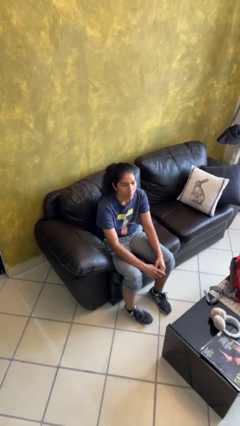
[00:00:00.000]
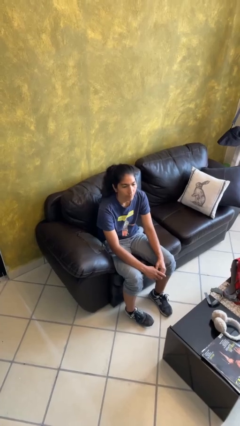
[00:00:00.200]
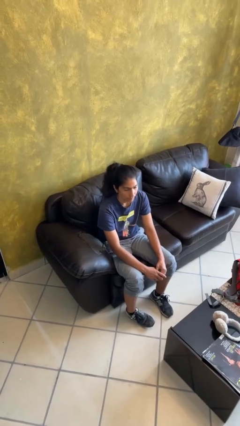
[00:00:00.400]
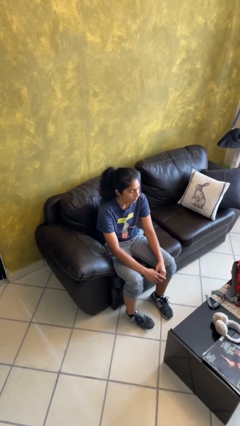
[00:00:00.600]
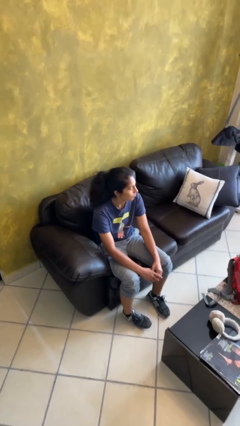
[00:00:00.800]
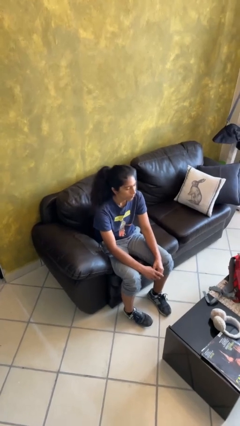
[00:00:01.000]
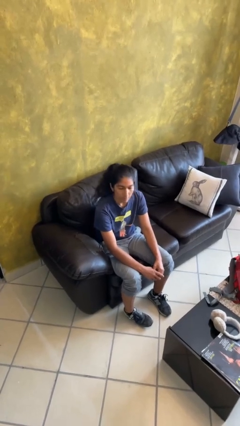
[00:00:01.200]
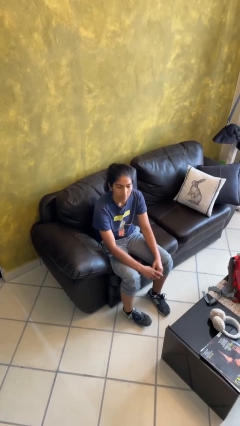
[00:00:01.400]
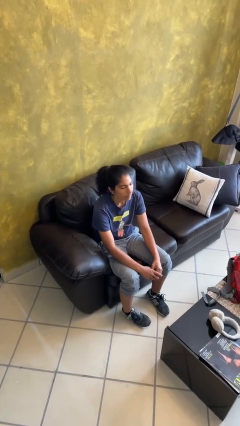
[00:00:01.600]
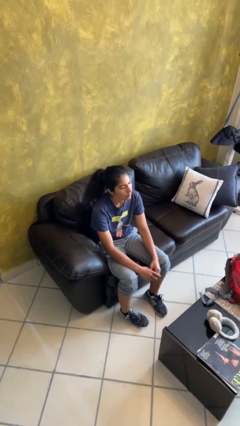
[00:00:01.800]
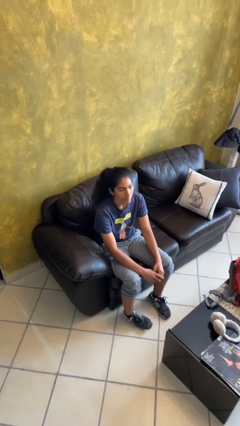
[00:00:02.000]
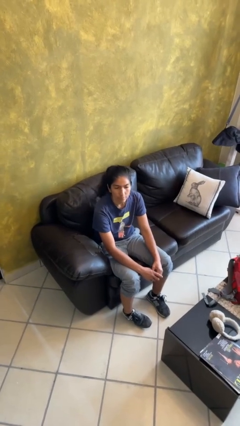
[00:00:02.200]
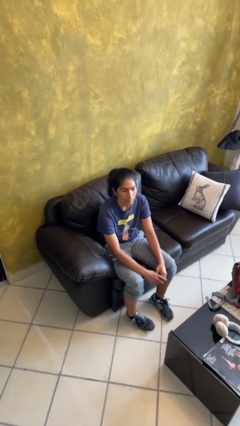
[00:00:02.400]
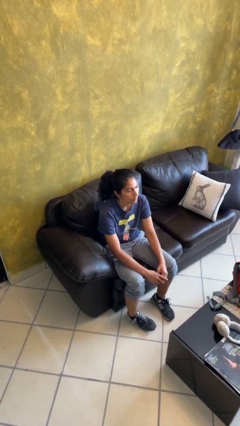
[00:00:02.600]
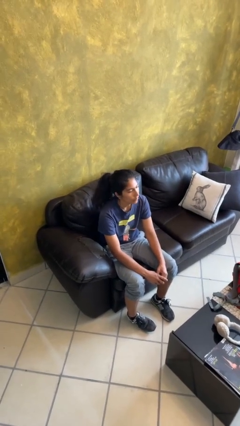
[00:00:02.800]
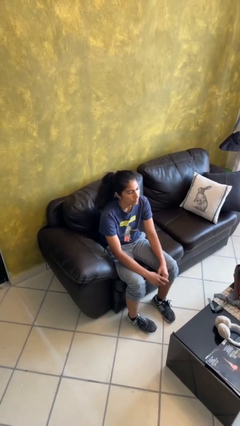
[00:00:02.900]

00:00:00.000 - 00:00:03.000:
person shakes head

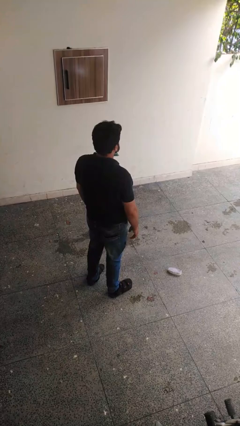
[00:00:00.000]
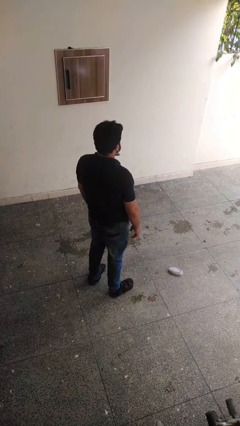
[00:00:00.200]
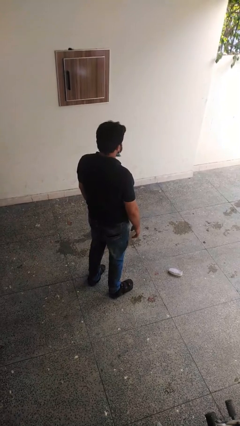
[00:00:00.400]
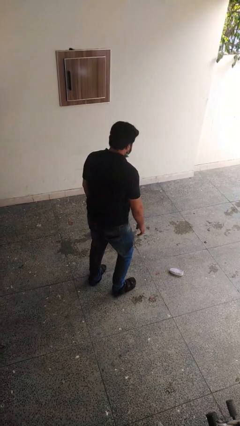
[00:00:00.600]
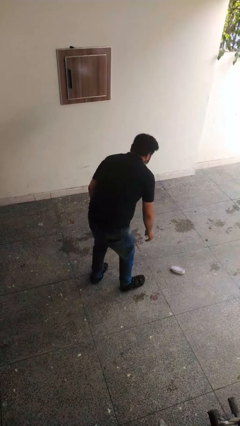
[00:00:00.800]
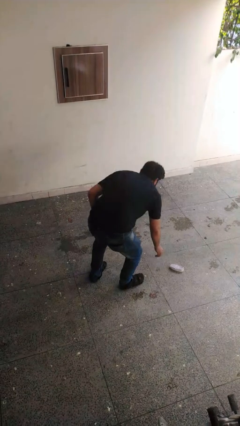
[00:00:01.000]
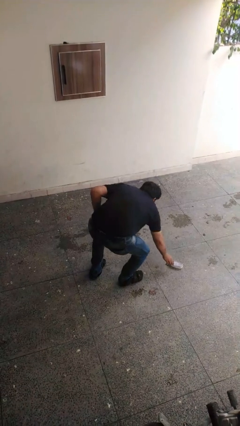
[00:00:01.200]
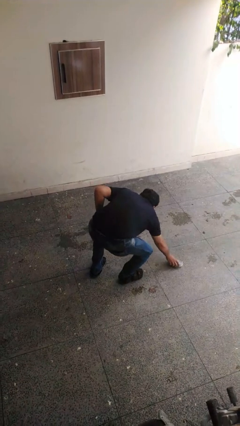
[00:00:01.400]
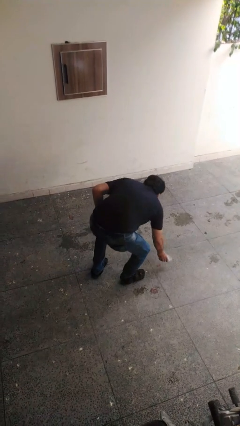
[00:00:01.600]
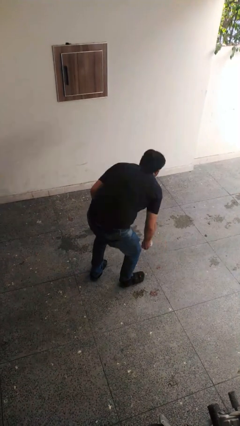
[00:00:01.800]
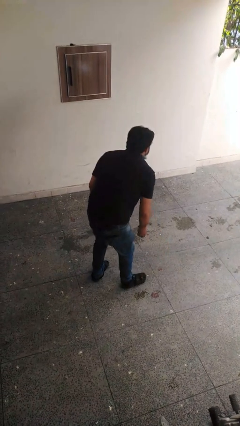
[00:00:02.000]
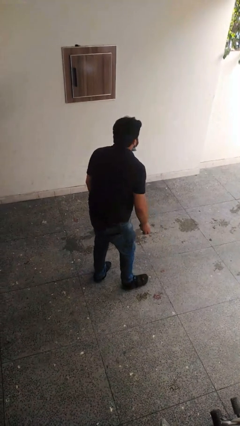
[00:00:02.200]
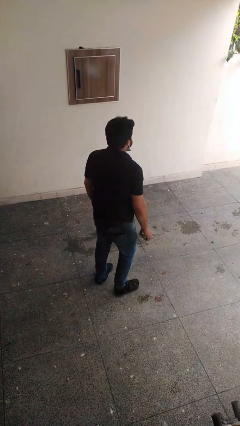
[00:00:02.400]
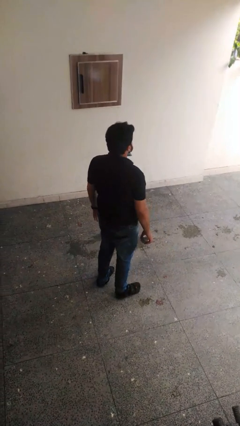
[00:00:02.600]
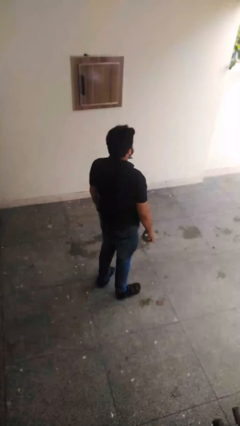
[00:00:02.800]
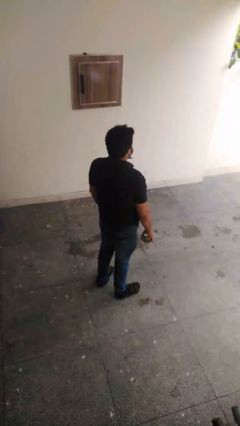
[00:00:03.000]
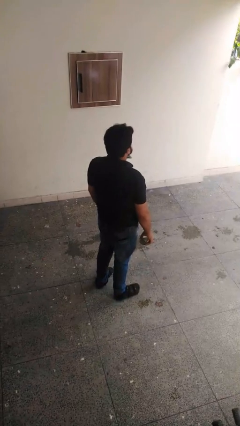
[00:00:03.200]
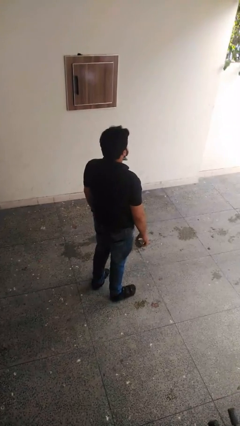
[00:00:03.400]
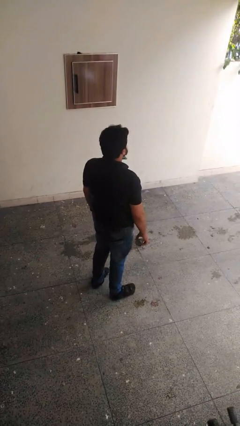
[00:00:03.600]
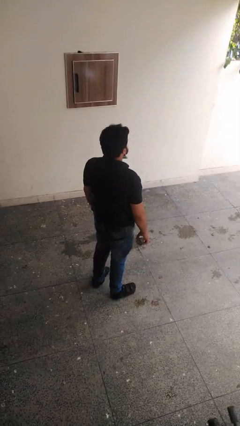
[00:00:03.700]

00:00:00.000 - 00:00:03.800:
person picks up object from floor

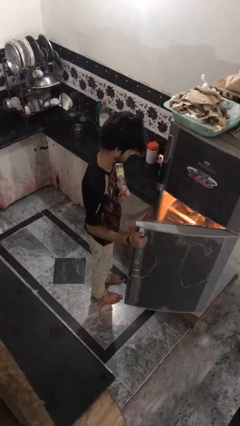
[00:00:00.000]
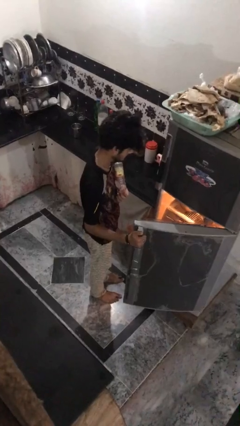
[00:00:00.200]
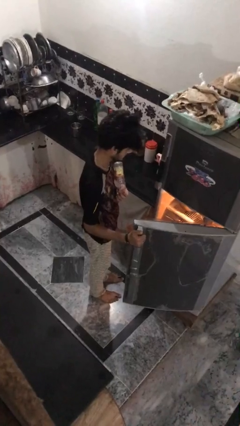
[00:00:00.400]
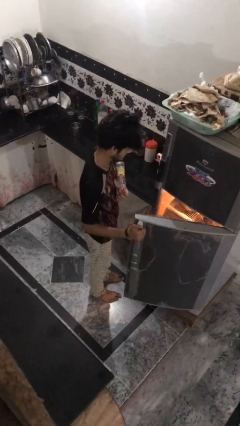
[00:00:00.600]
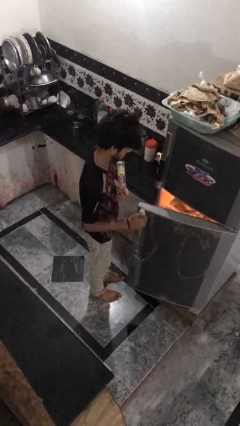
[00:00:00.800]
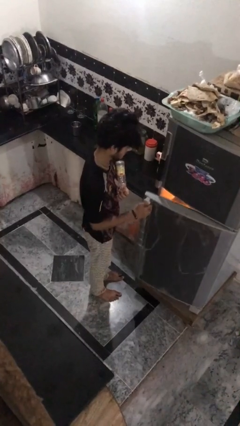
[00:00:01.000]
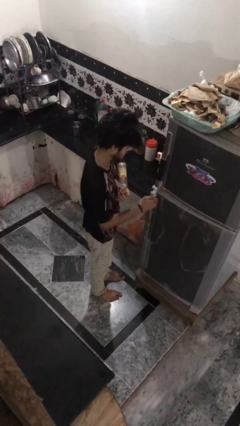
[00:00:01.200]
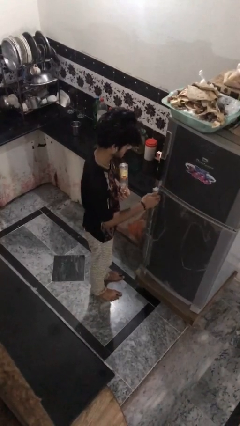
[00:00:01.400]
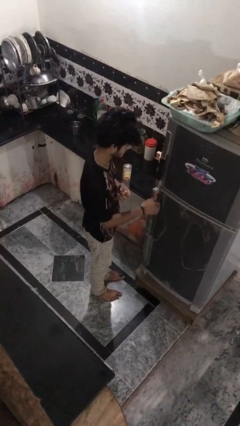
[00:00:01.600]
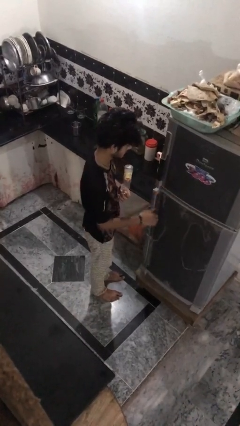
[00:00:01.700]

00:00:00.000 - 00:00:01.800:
person closes refrigerator

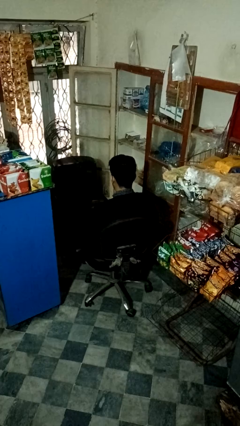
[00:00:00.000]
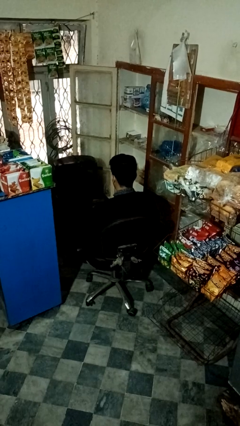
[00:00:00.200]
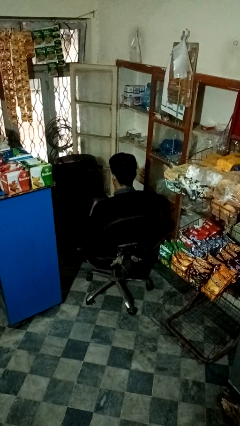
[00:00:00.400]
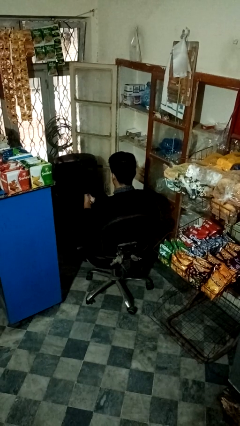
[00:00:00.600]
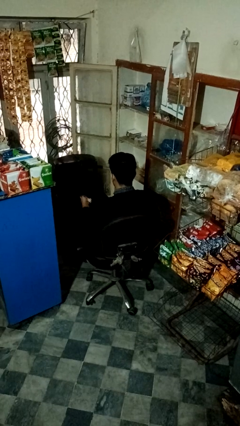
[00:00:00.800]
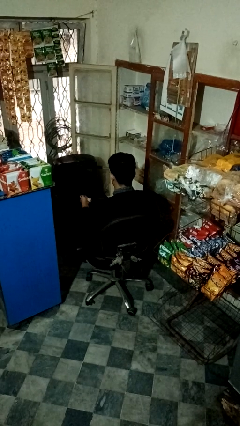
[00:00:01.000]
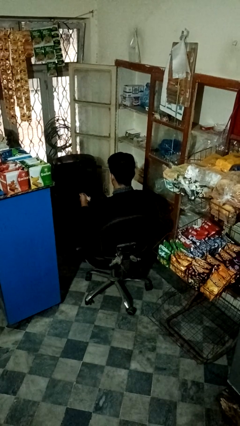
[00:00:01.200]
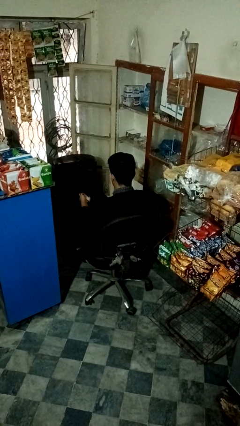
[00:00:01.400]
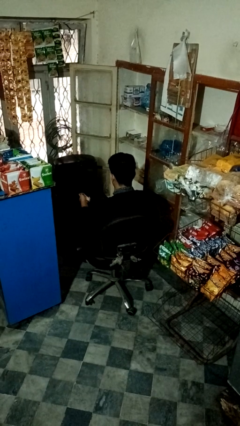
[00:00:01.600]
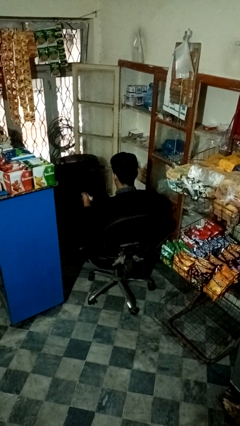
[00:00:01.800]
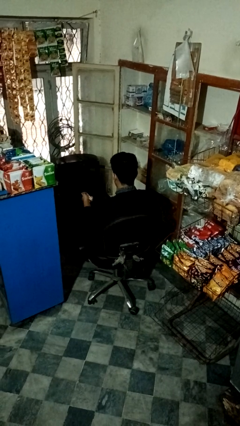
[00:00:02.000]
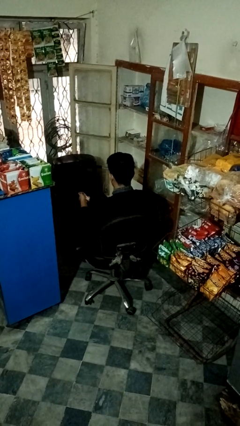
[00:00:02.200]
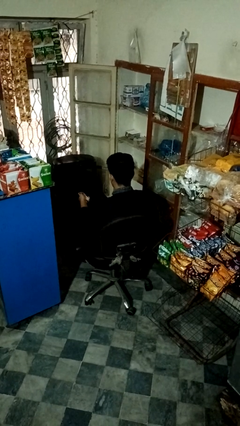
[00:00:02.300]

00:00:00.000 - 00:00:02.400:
person uses television remote

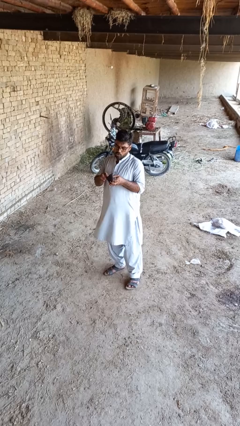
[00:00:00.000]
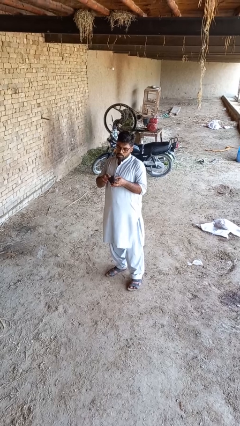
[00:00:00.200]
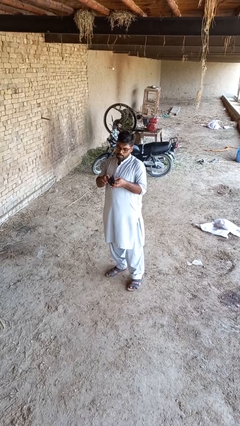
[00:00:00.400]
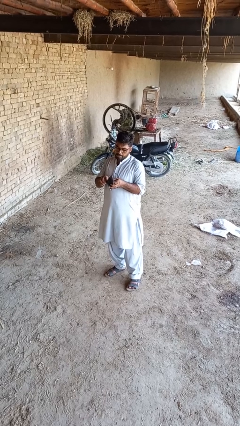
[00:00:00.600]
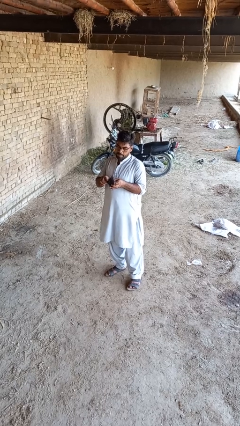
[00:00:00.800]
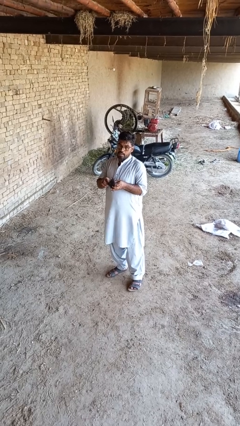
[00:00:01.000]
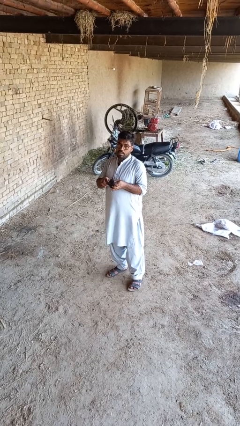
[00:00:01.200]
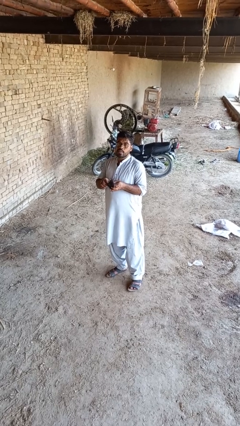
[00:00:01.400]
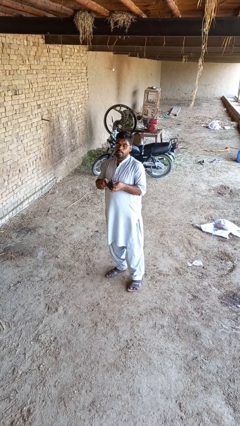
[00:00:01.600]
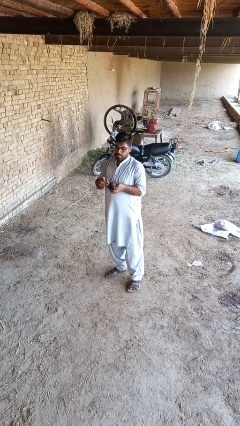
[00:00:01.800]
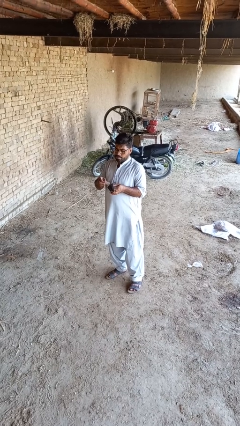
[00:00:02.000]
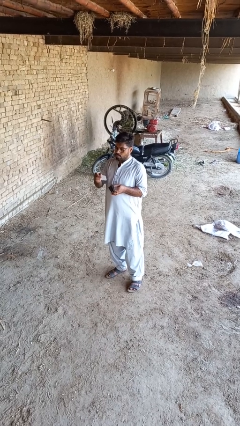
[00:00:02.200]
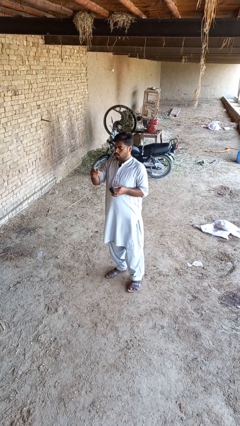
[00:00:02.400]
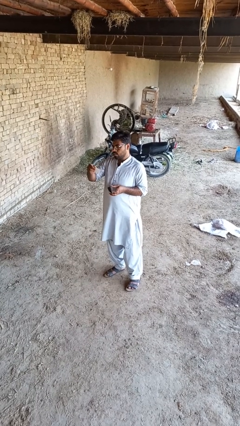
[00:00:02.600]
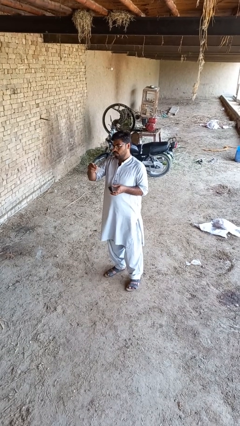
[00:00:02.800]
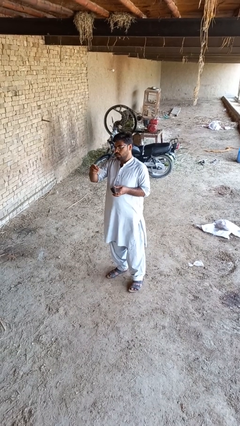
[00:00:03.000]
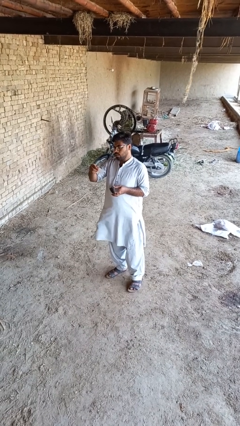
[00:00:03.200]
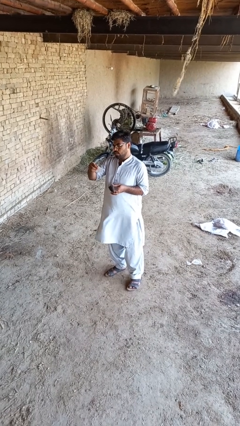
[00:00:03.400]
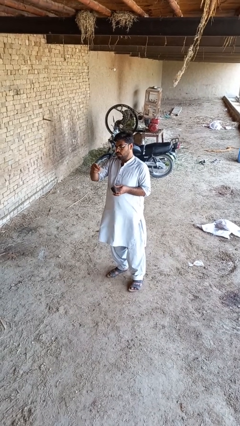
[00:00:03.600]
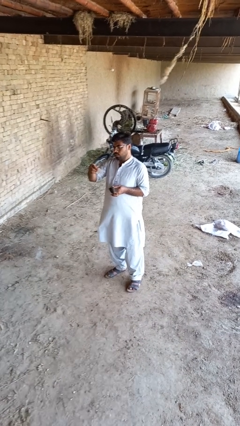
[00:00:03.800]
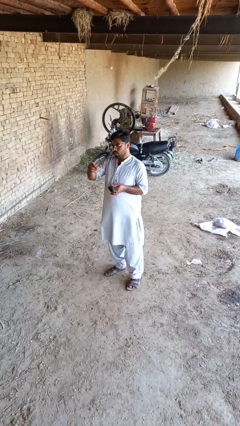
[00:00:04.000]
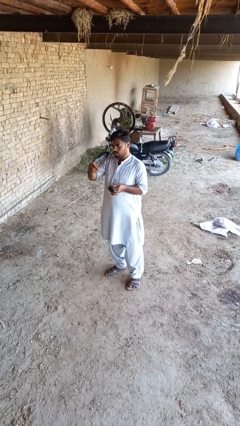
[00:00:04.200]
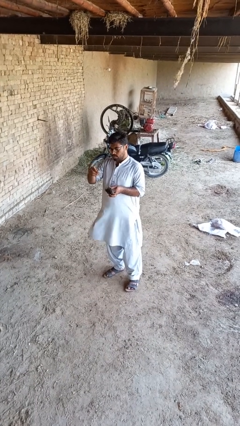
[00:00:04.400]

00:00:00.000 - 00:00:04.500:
person takes object from purse

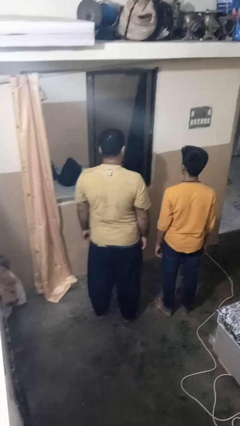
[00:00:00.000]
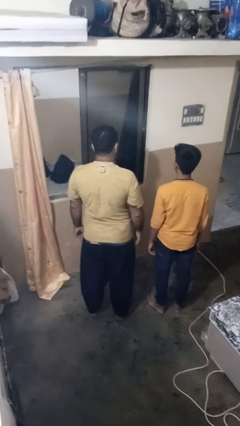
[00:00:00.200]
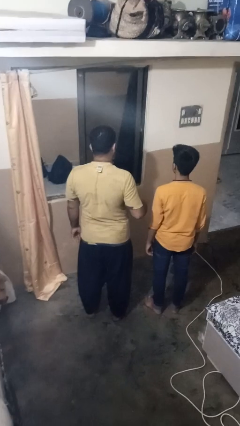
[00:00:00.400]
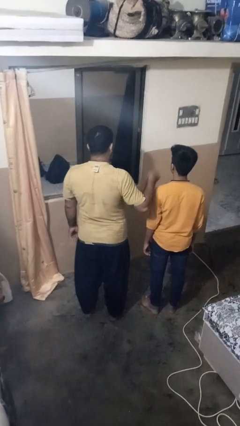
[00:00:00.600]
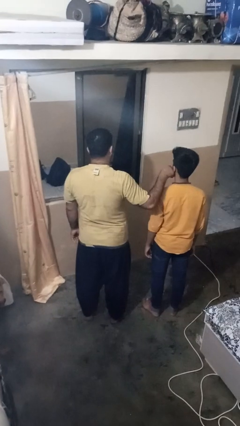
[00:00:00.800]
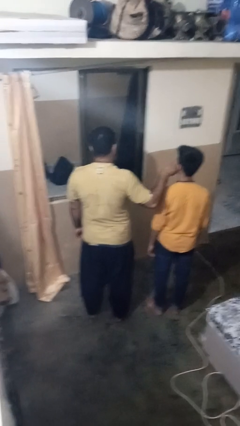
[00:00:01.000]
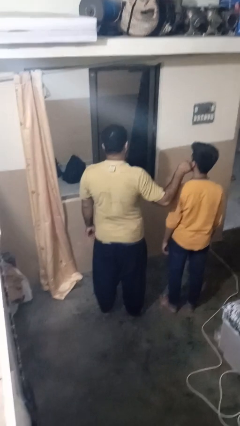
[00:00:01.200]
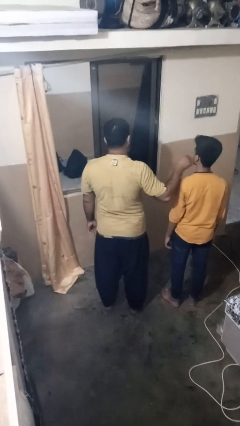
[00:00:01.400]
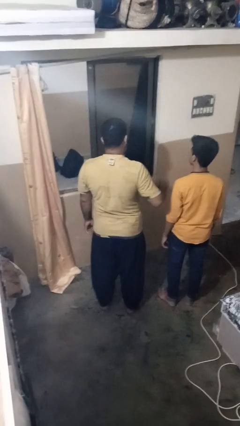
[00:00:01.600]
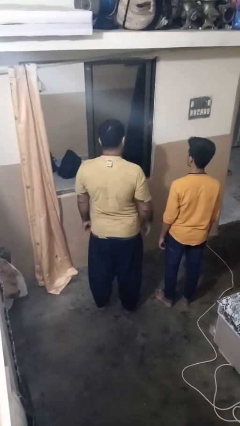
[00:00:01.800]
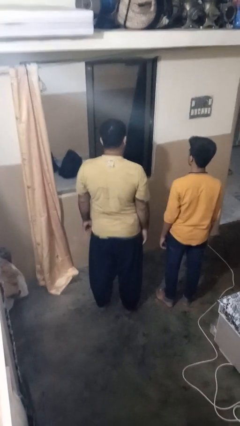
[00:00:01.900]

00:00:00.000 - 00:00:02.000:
person touches face of person
